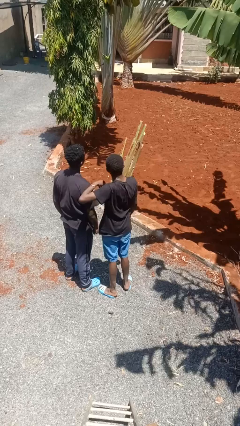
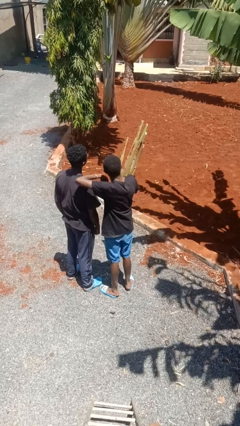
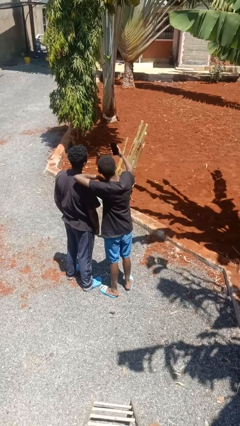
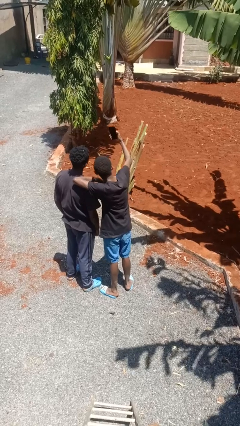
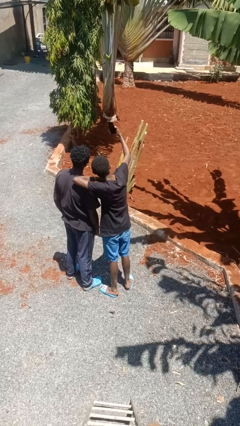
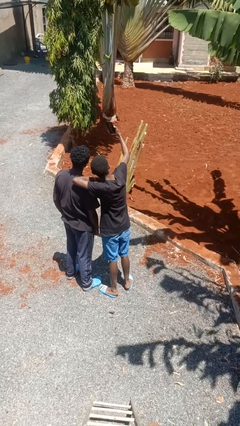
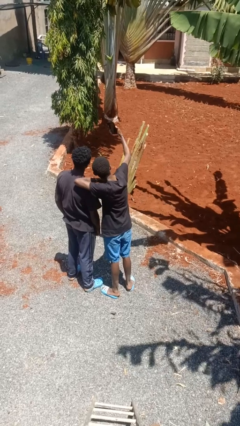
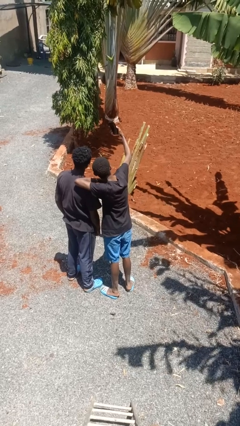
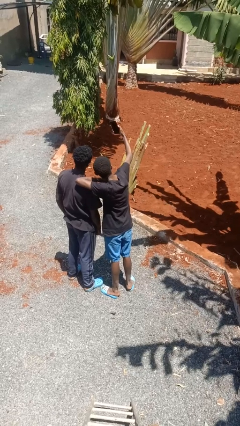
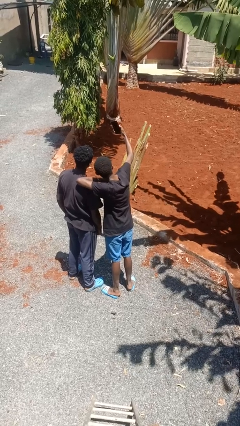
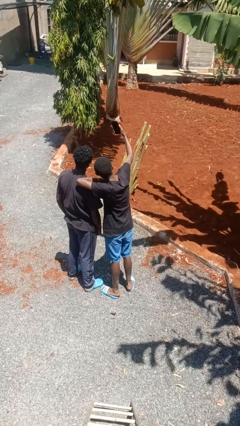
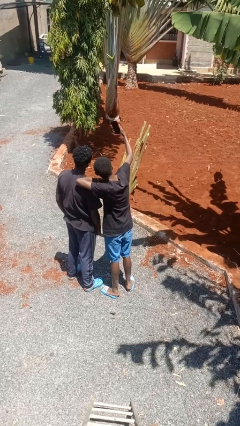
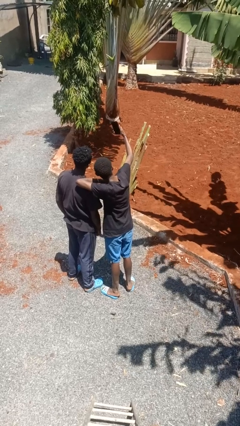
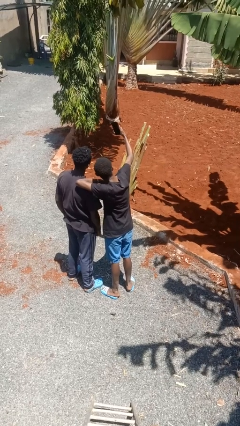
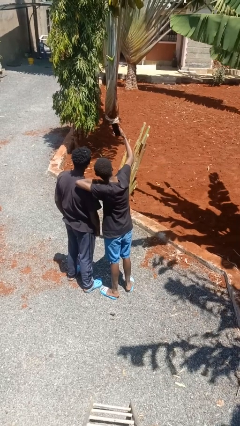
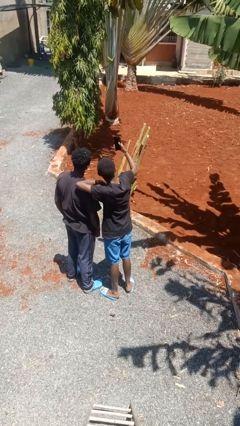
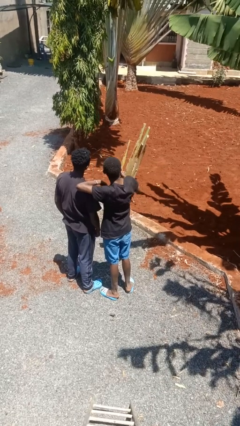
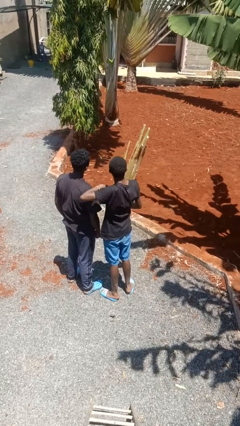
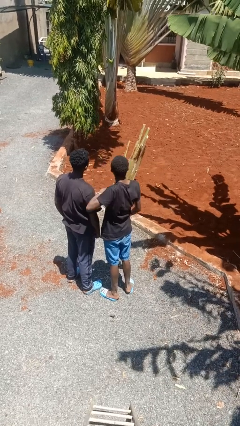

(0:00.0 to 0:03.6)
person takes selfie with person

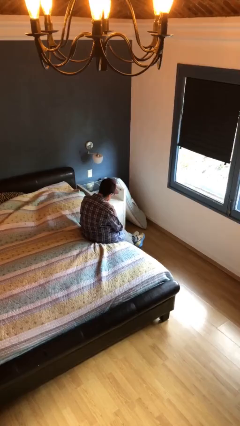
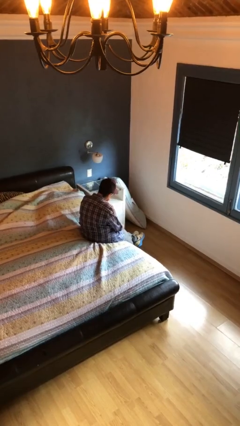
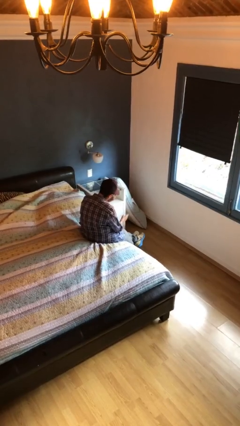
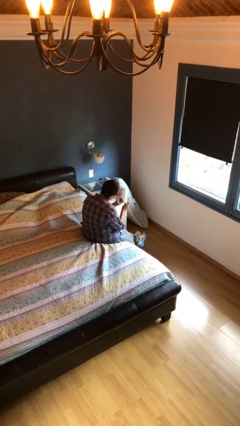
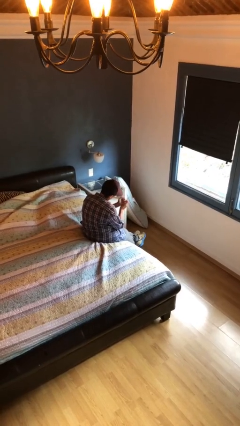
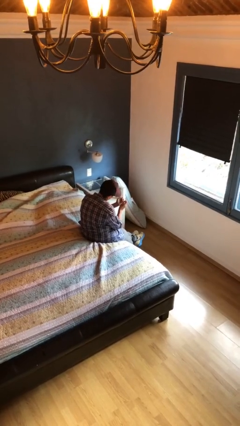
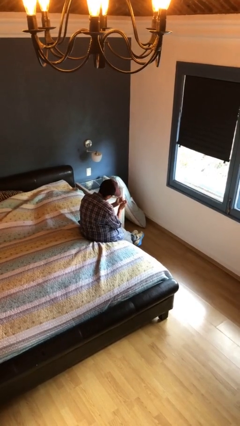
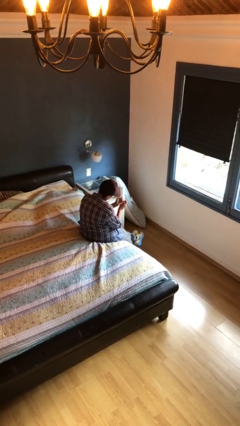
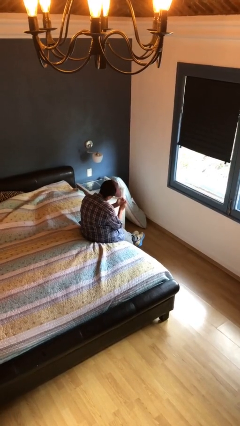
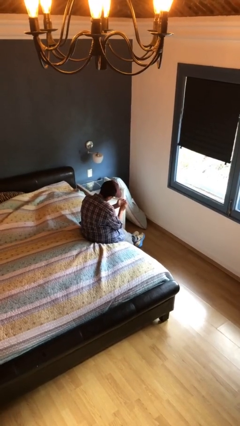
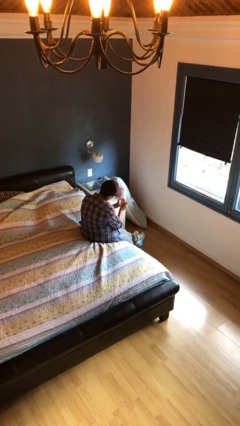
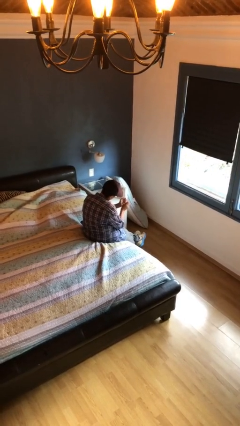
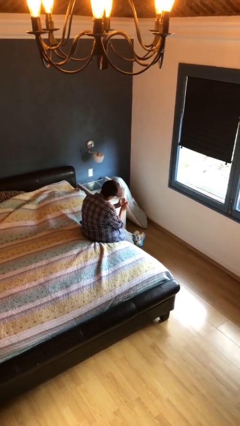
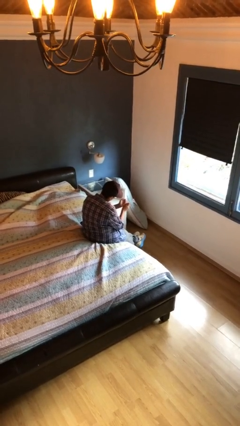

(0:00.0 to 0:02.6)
person clips fingernails

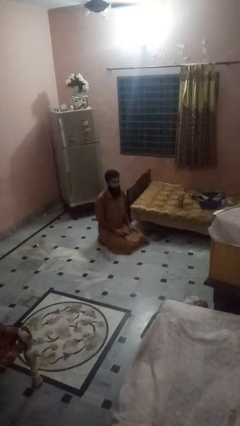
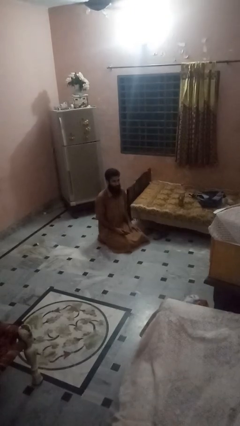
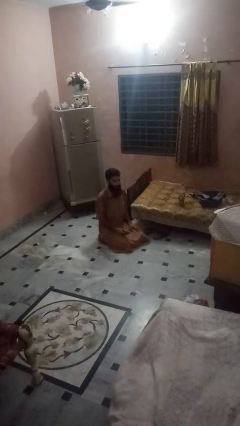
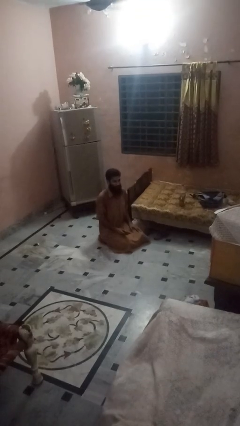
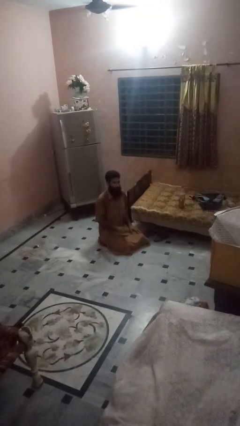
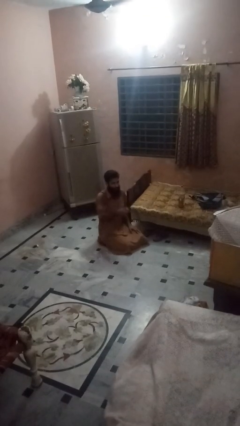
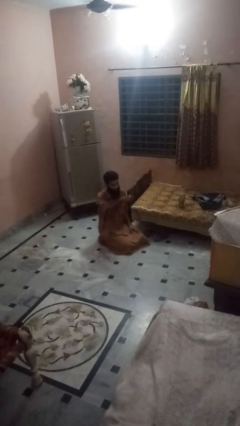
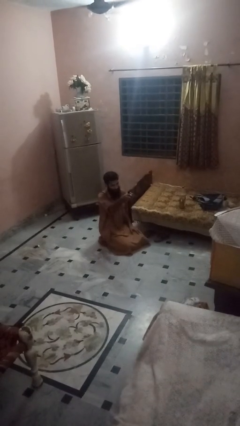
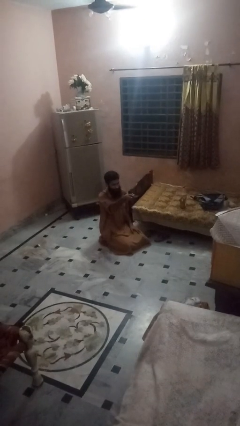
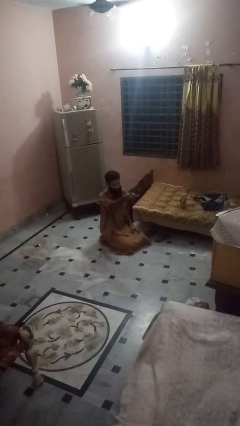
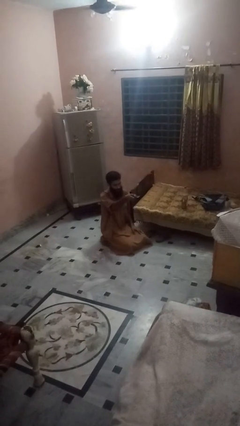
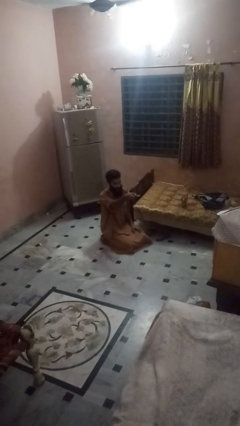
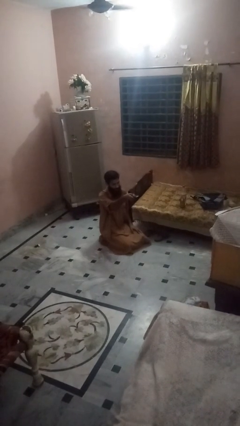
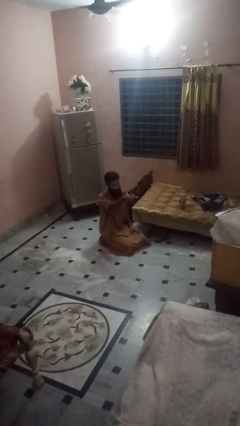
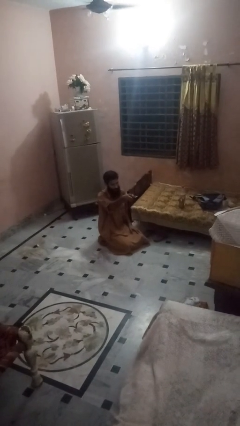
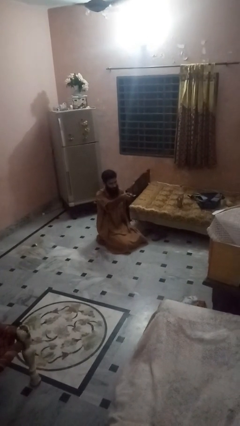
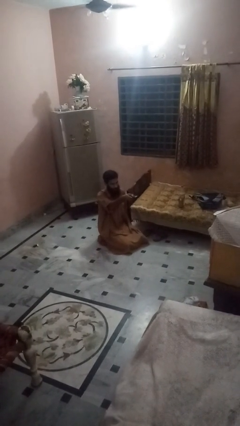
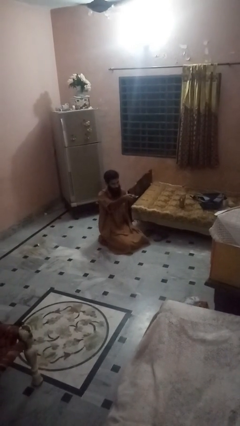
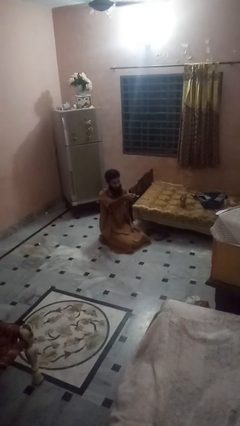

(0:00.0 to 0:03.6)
person uses television remote

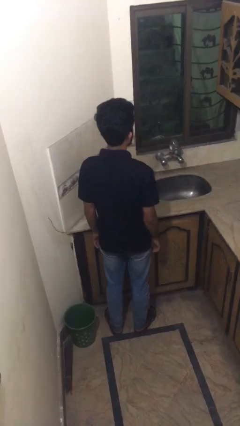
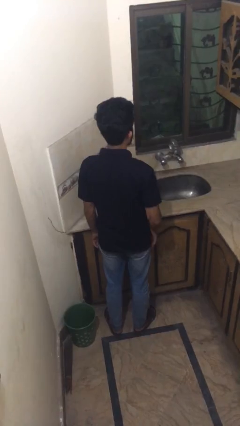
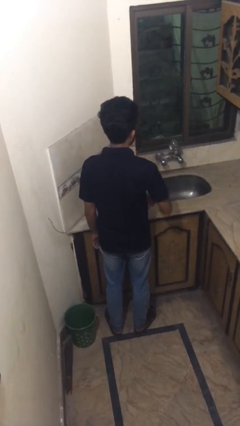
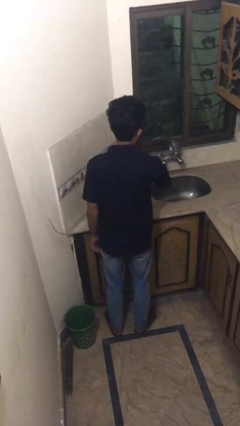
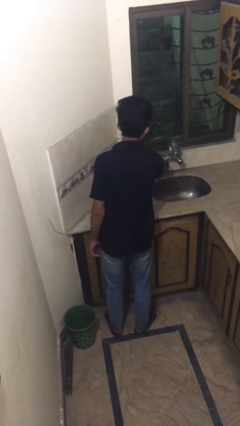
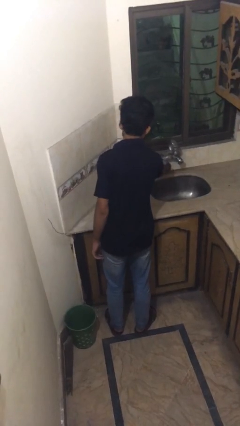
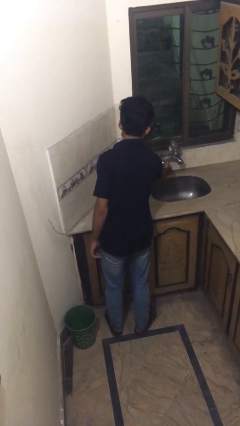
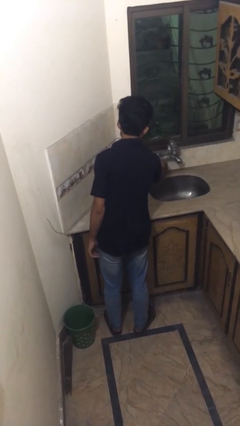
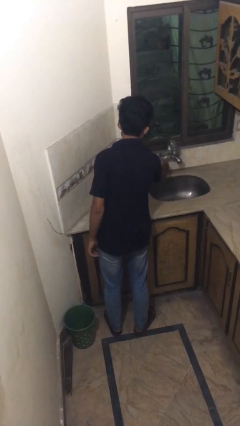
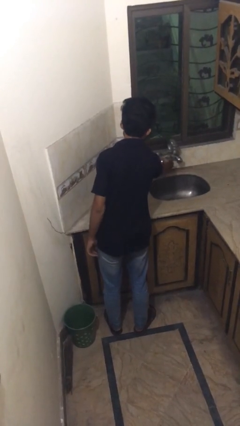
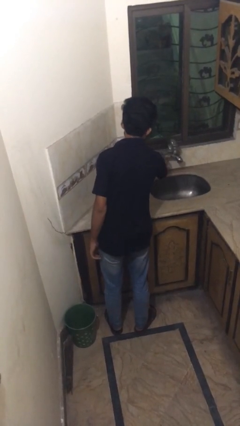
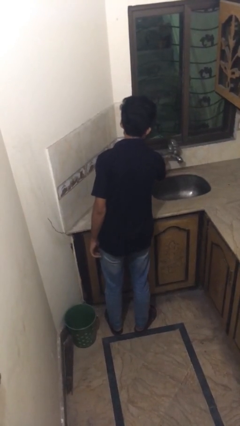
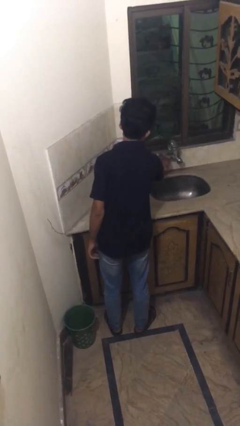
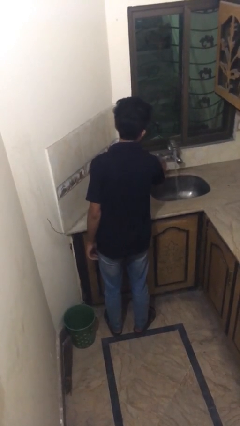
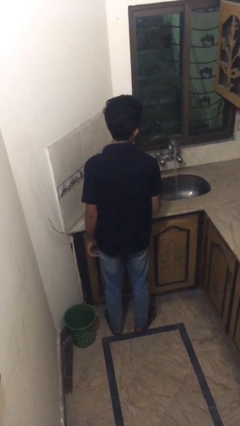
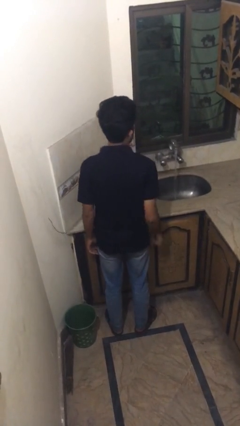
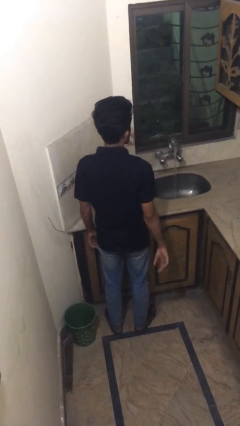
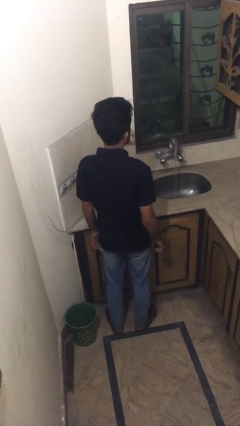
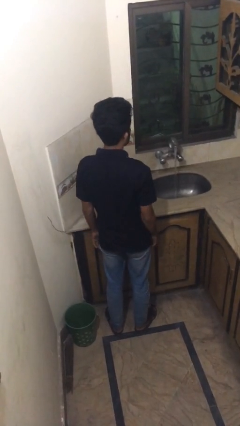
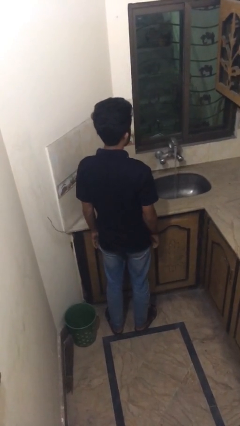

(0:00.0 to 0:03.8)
person turns on faucet

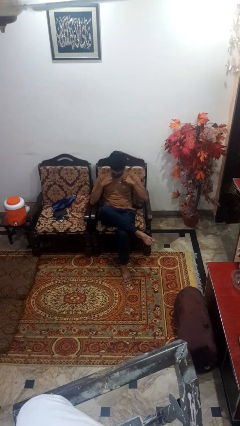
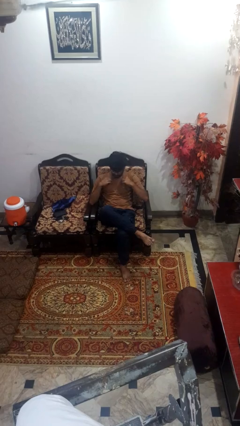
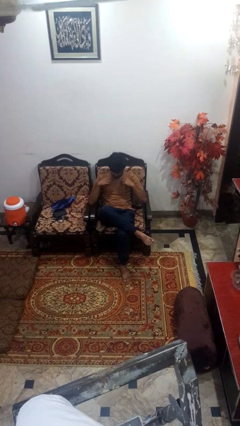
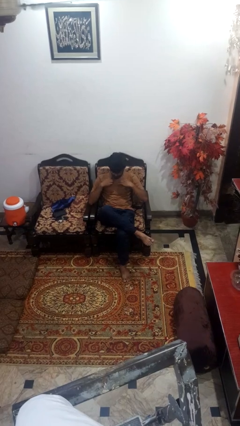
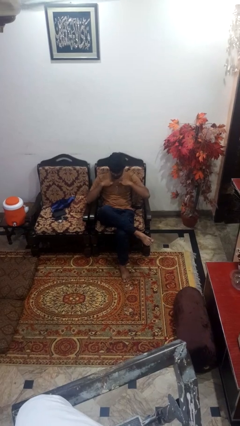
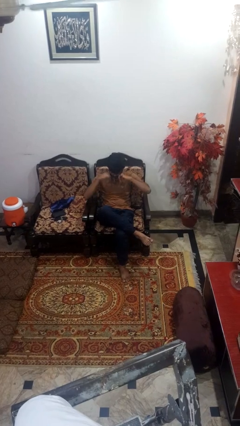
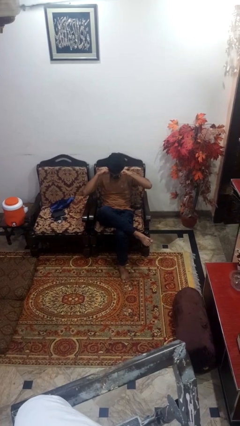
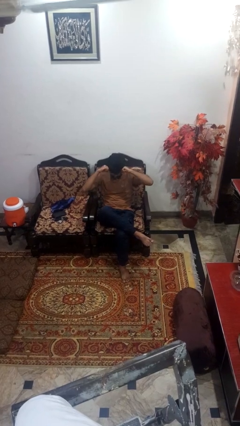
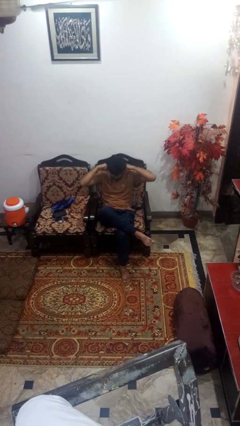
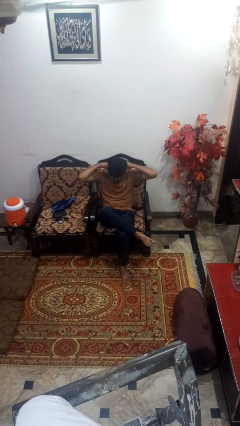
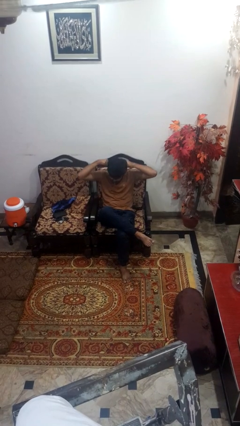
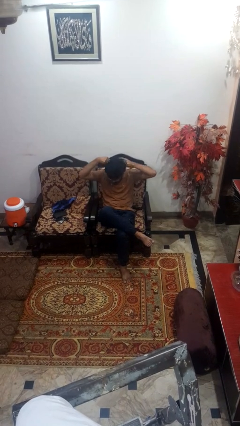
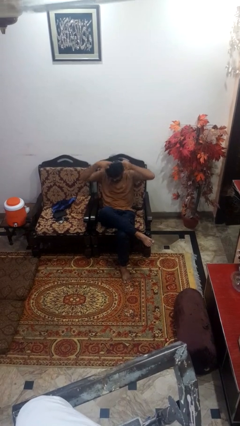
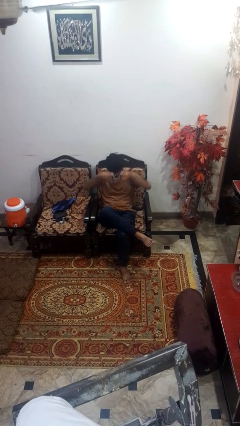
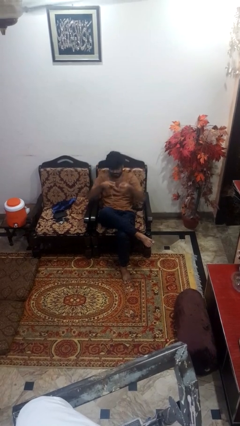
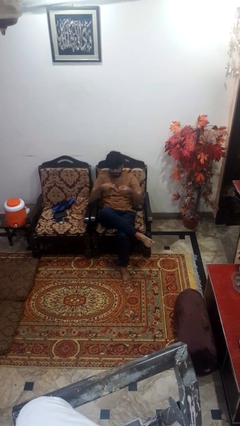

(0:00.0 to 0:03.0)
person takes off necklace

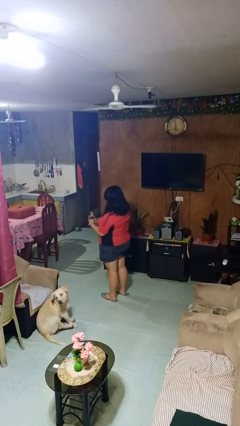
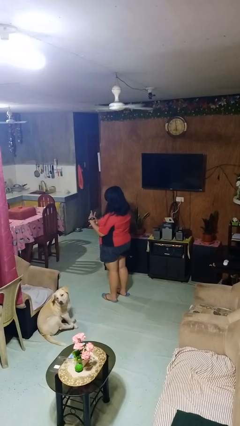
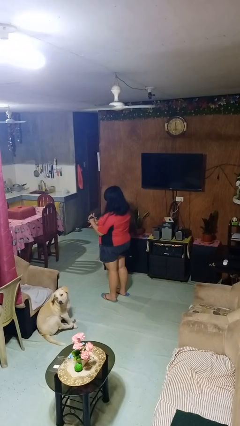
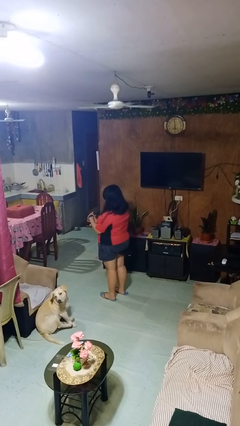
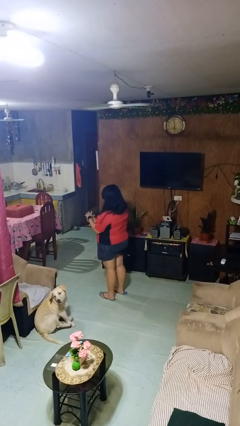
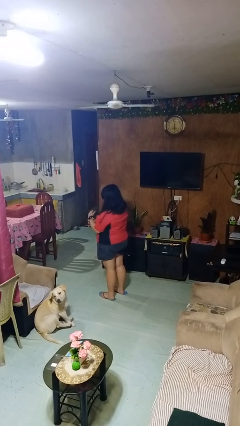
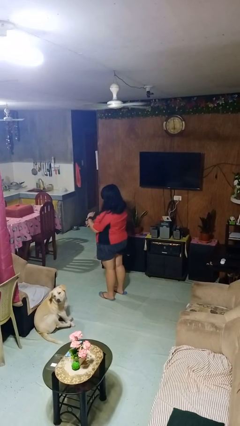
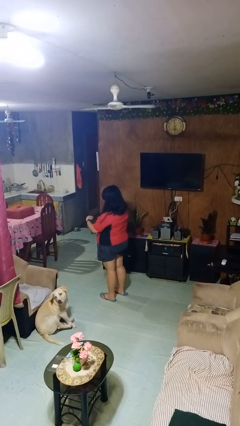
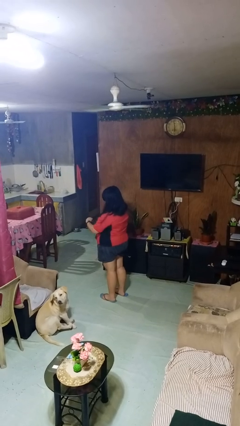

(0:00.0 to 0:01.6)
person puts on wristwatch
